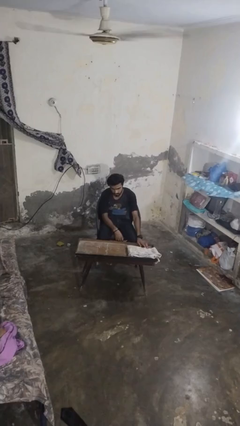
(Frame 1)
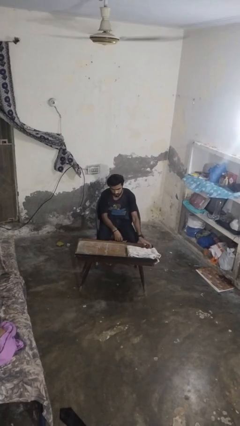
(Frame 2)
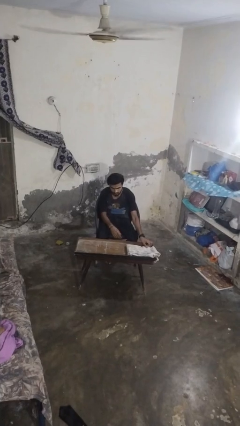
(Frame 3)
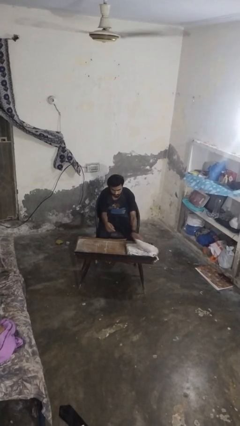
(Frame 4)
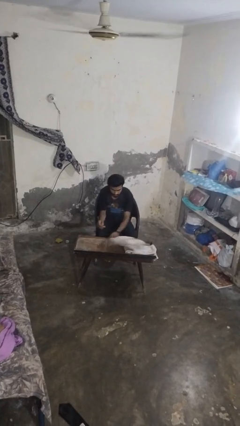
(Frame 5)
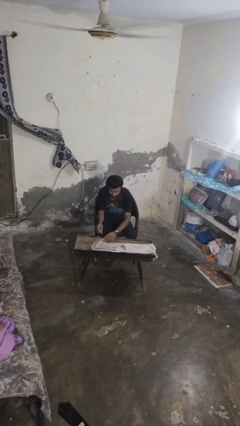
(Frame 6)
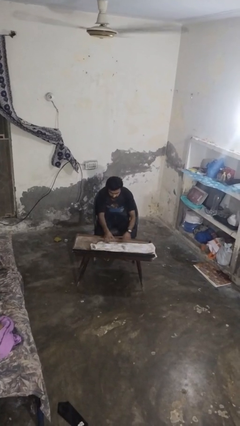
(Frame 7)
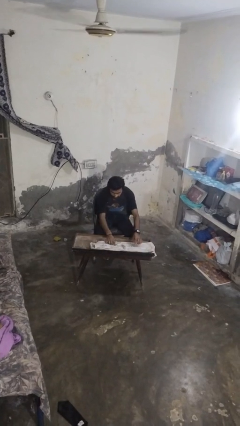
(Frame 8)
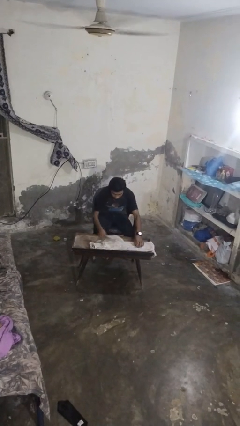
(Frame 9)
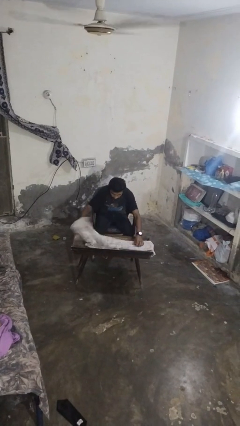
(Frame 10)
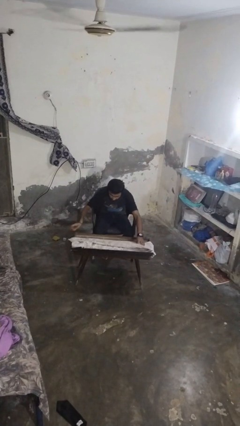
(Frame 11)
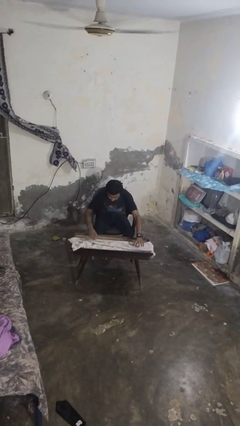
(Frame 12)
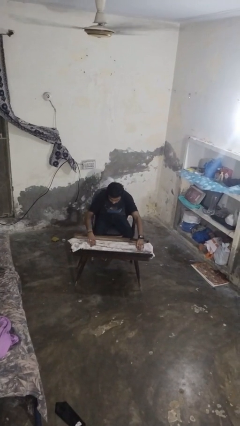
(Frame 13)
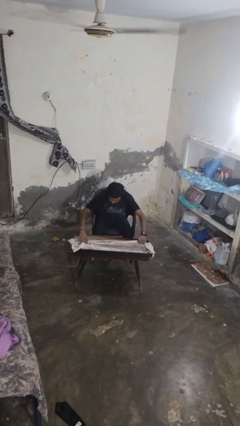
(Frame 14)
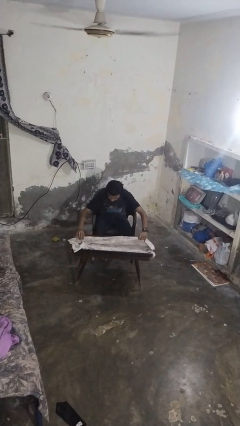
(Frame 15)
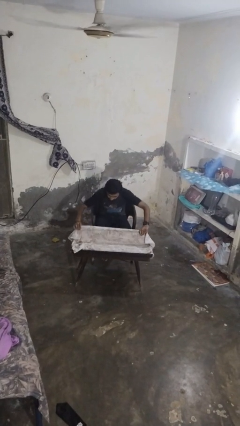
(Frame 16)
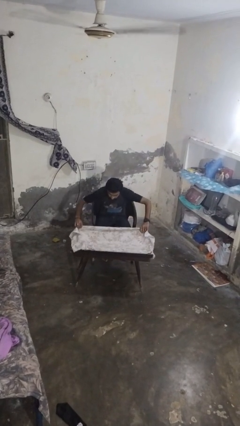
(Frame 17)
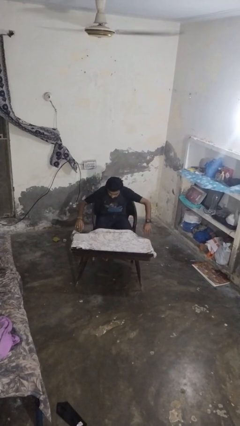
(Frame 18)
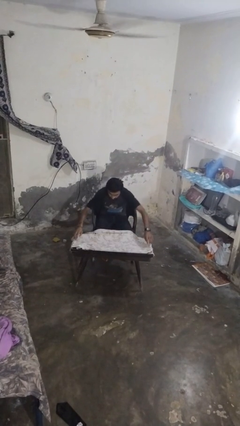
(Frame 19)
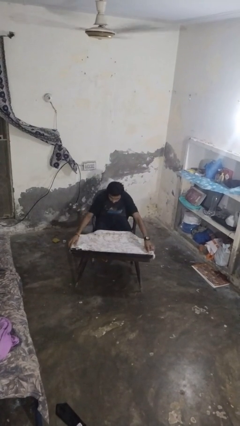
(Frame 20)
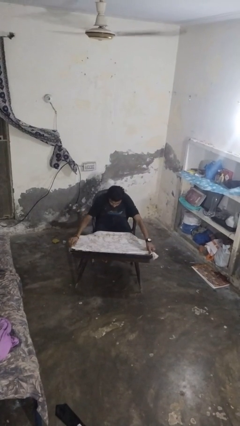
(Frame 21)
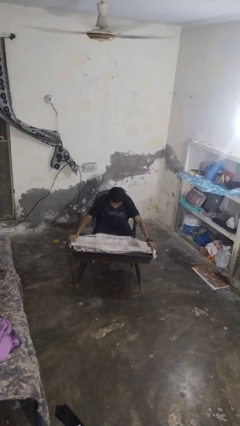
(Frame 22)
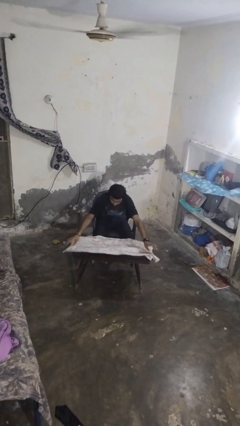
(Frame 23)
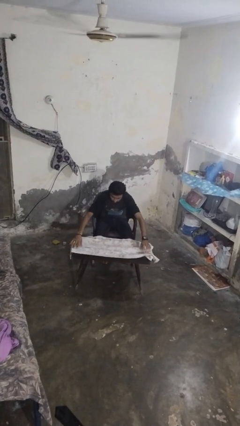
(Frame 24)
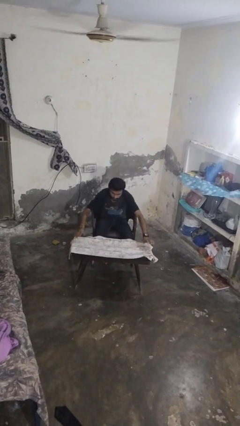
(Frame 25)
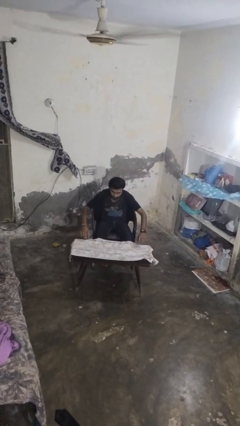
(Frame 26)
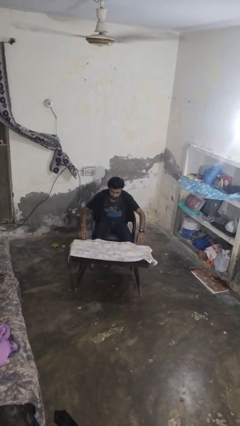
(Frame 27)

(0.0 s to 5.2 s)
person spreads tablecloth

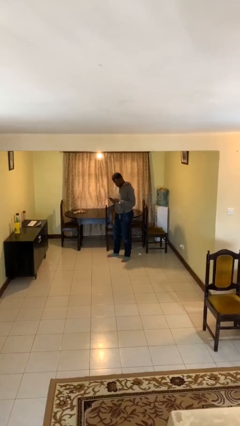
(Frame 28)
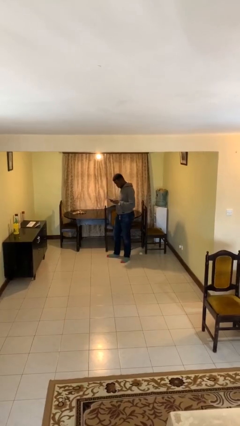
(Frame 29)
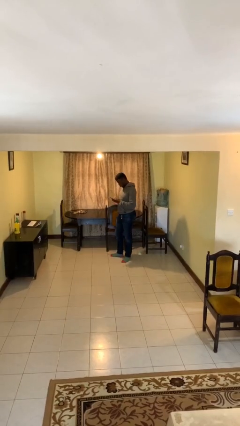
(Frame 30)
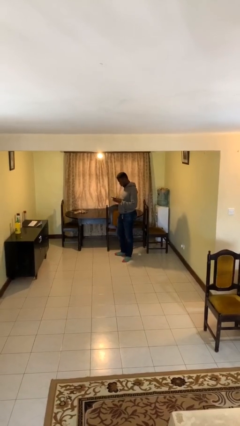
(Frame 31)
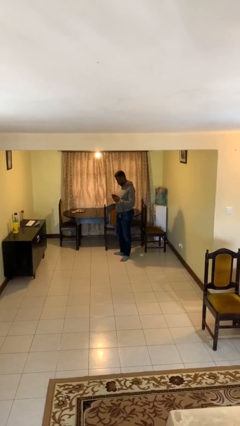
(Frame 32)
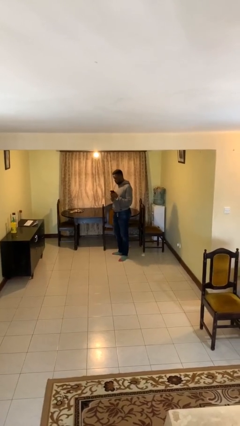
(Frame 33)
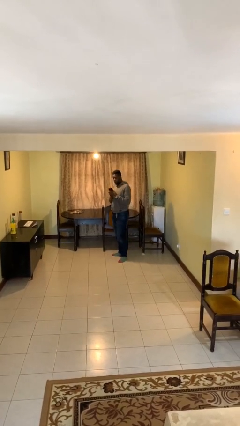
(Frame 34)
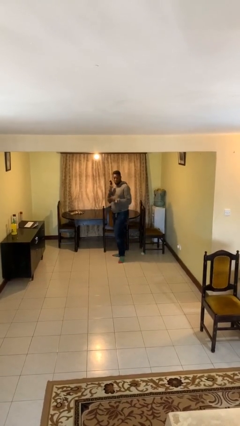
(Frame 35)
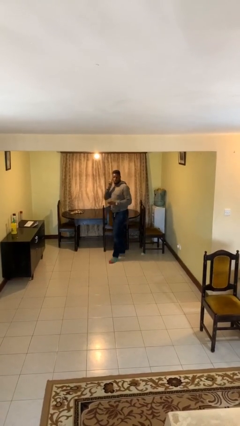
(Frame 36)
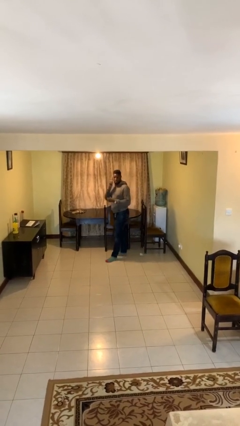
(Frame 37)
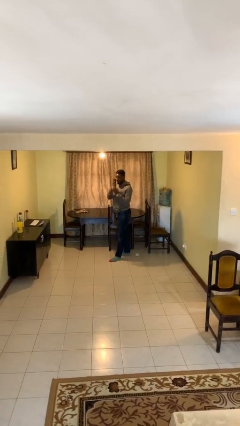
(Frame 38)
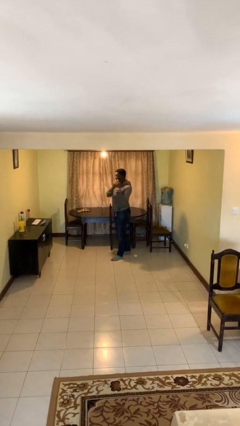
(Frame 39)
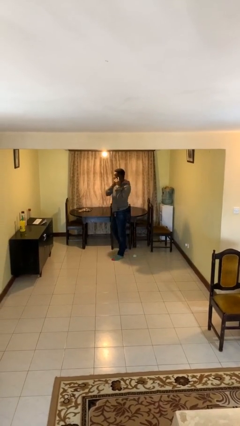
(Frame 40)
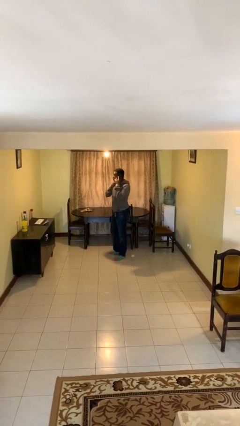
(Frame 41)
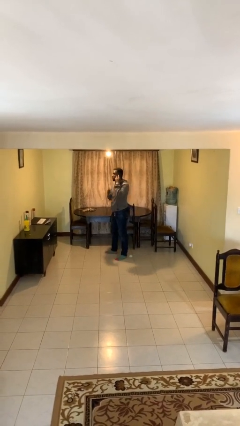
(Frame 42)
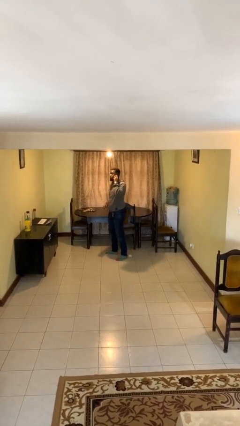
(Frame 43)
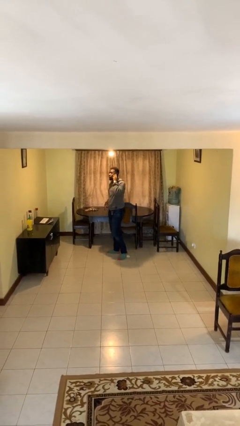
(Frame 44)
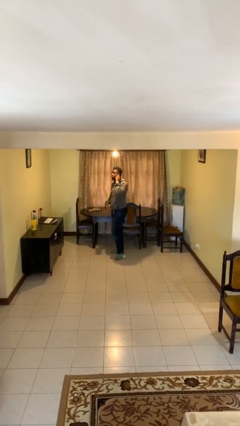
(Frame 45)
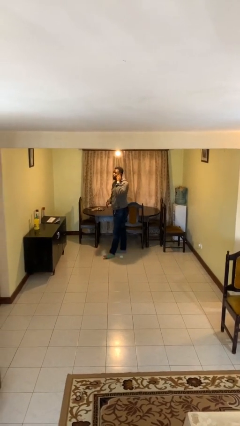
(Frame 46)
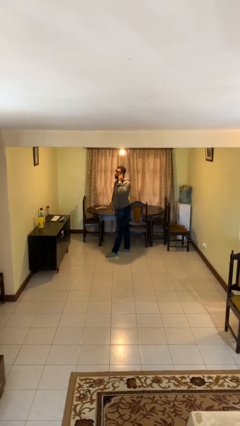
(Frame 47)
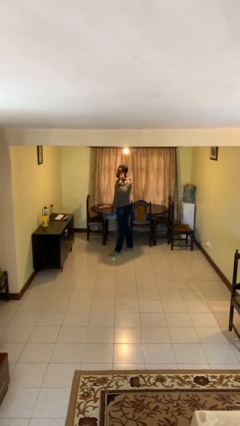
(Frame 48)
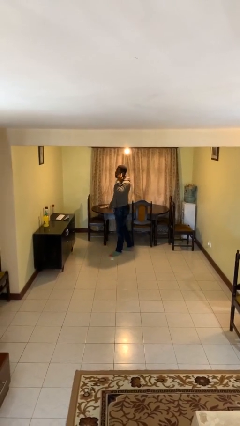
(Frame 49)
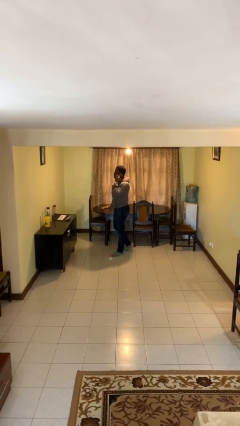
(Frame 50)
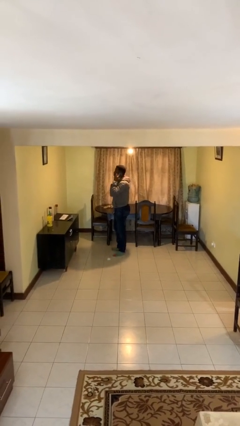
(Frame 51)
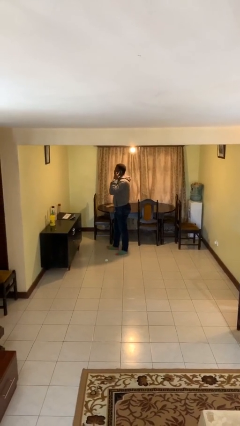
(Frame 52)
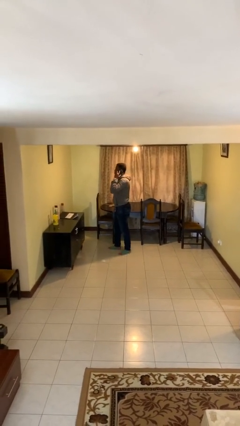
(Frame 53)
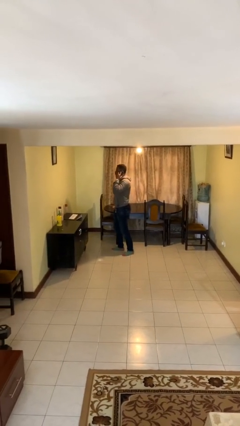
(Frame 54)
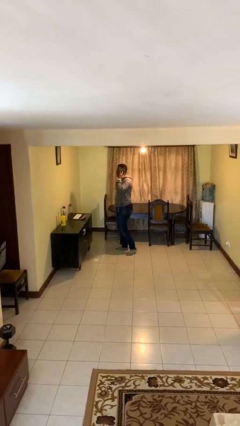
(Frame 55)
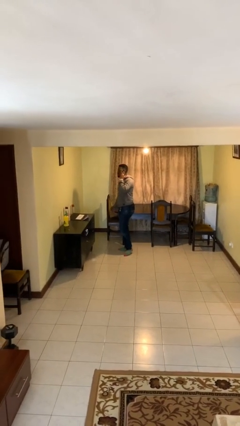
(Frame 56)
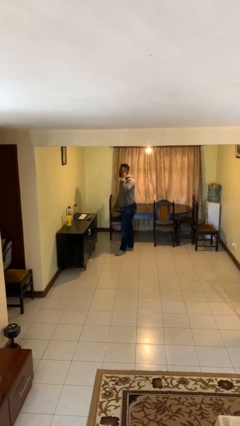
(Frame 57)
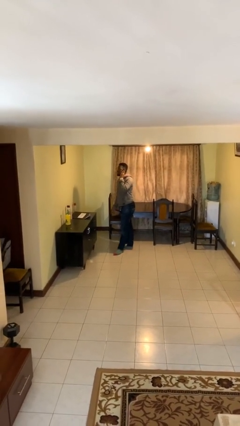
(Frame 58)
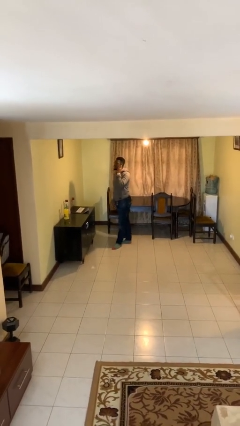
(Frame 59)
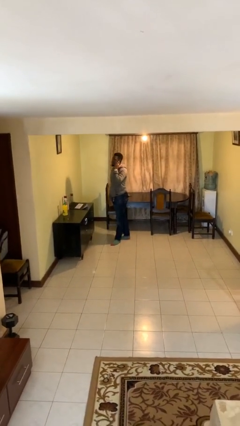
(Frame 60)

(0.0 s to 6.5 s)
person talks on phone

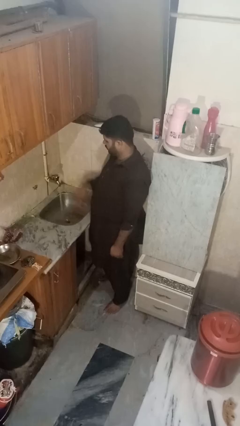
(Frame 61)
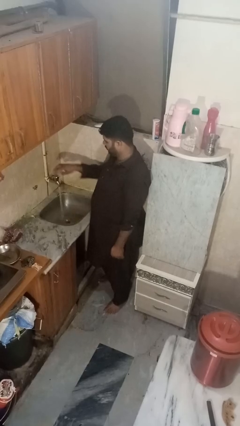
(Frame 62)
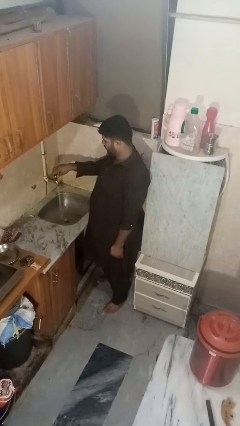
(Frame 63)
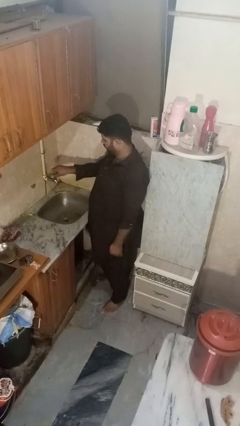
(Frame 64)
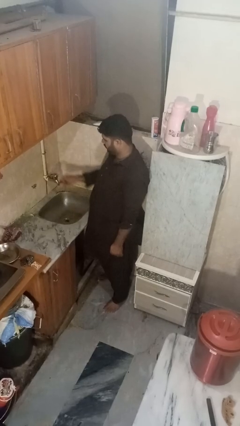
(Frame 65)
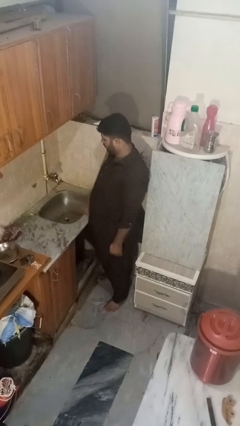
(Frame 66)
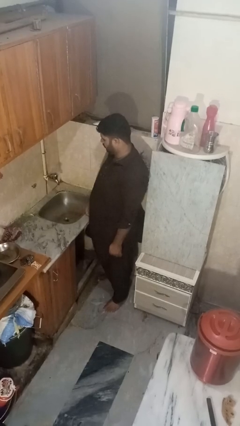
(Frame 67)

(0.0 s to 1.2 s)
person turns off faucet

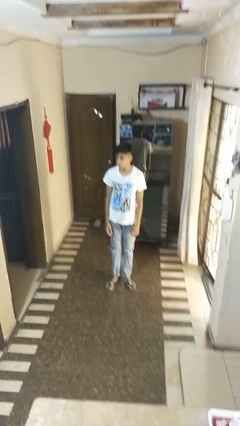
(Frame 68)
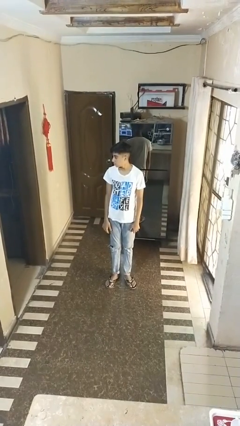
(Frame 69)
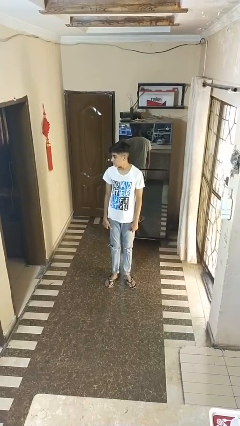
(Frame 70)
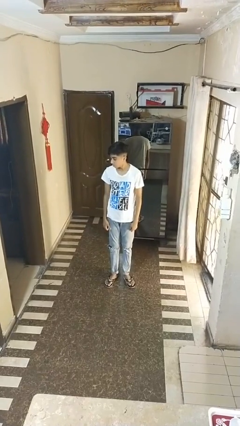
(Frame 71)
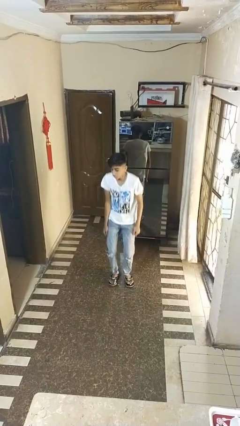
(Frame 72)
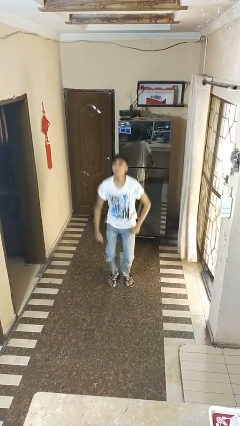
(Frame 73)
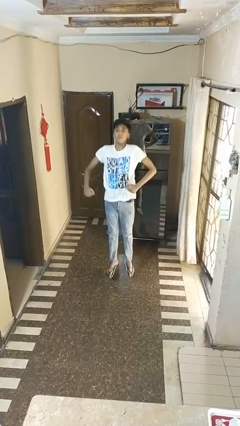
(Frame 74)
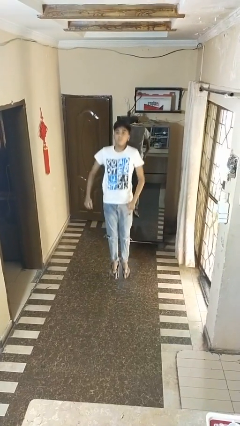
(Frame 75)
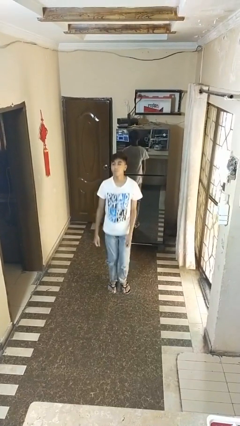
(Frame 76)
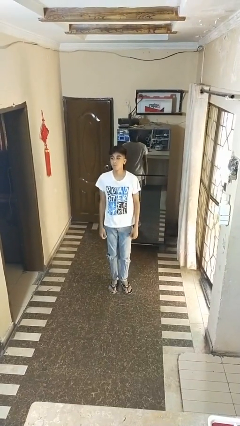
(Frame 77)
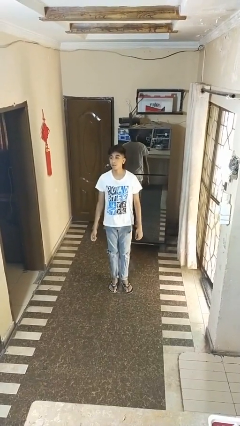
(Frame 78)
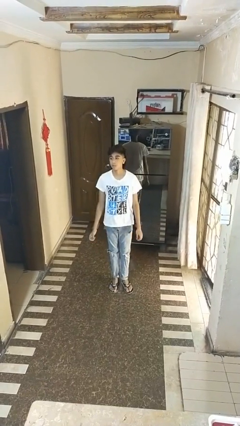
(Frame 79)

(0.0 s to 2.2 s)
person jumps

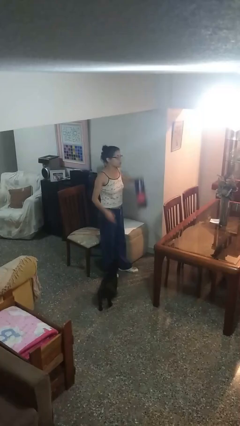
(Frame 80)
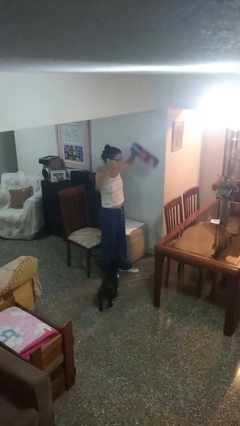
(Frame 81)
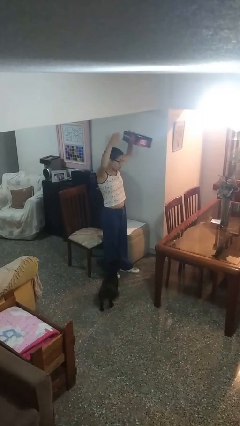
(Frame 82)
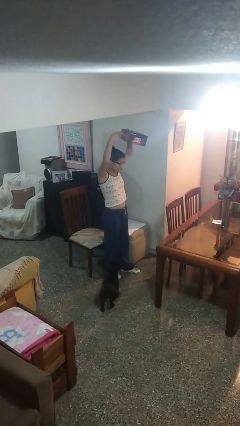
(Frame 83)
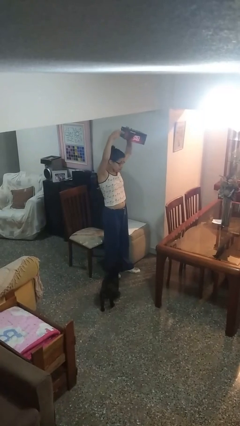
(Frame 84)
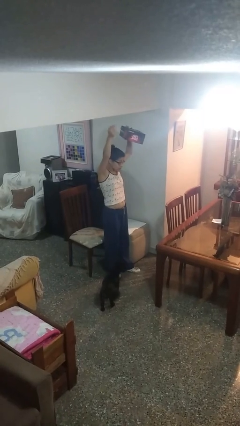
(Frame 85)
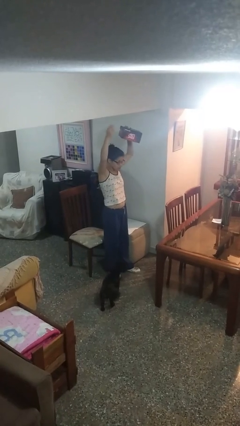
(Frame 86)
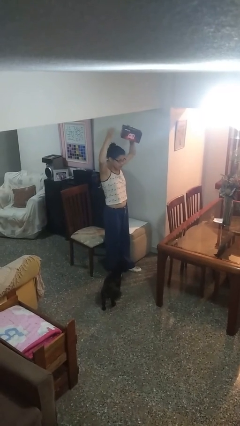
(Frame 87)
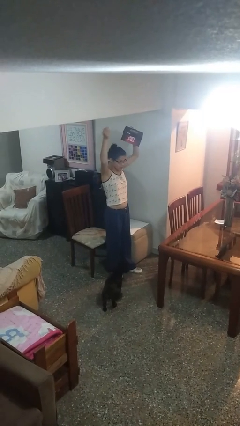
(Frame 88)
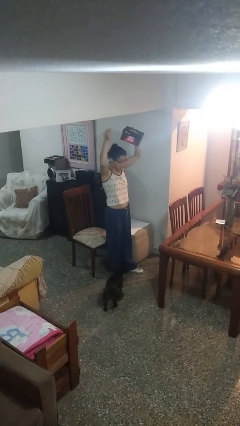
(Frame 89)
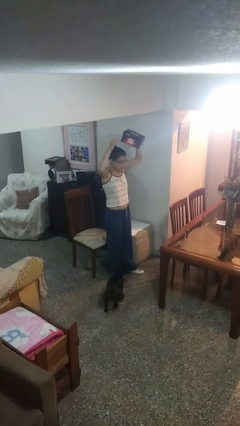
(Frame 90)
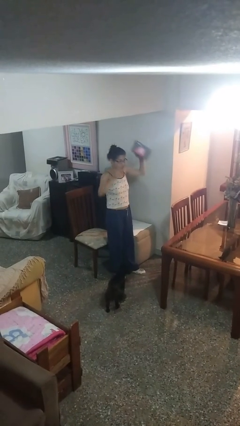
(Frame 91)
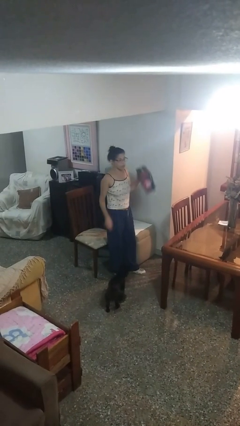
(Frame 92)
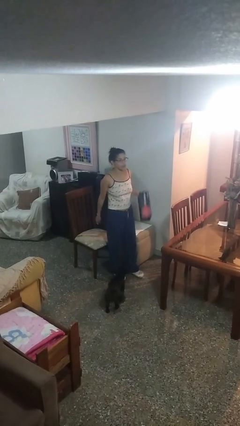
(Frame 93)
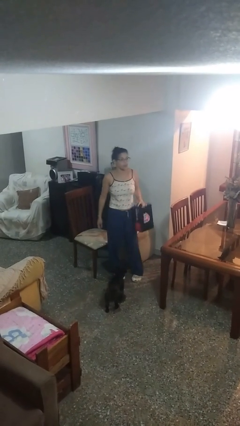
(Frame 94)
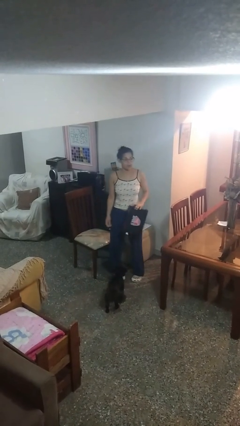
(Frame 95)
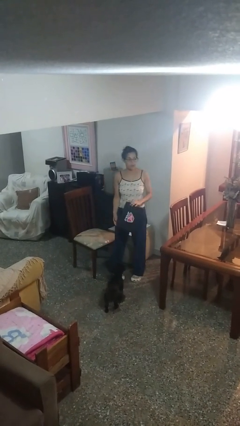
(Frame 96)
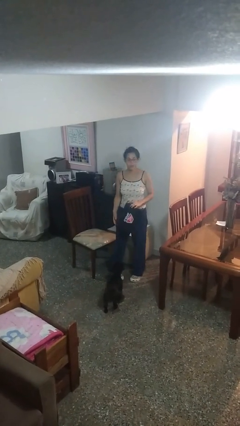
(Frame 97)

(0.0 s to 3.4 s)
person holds object above head
